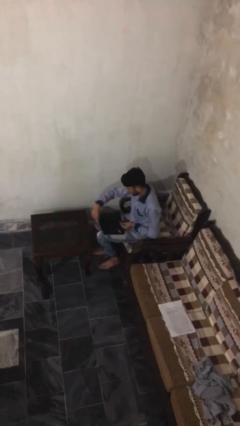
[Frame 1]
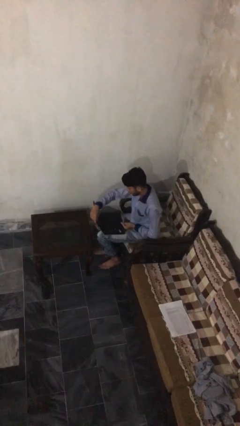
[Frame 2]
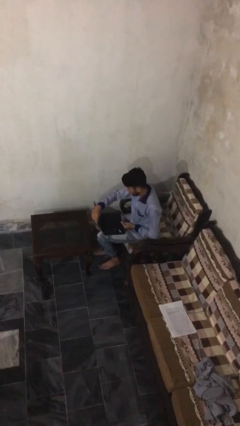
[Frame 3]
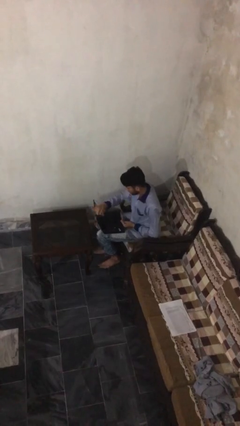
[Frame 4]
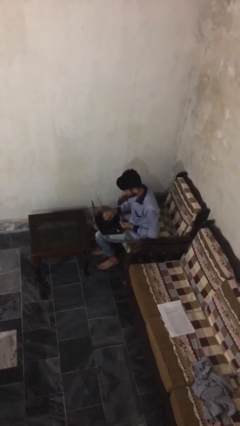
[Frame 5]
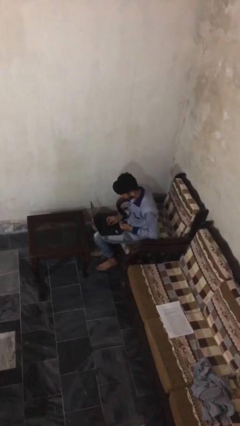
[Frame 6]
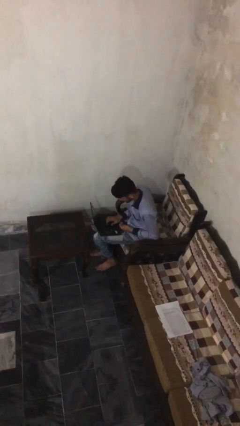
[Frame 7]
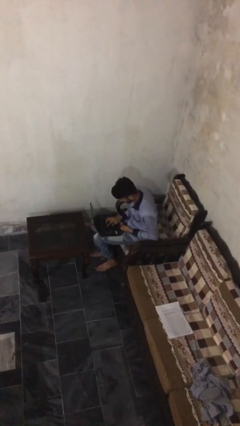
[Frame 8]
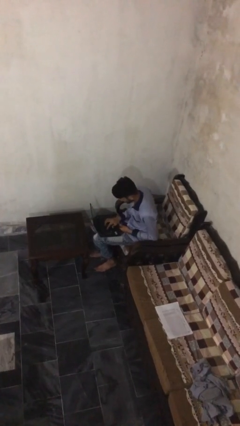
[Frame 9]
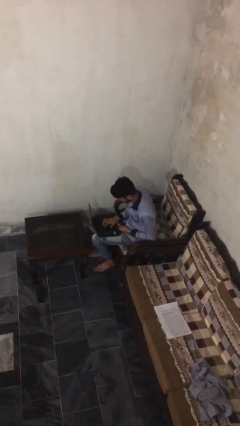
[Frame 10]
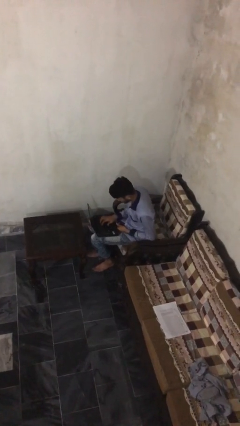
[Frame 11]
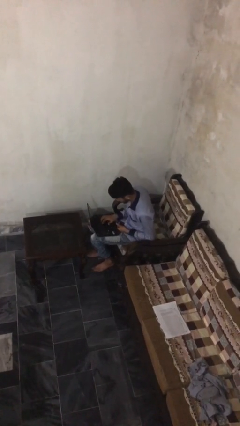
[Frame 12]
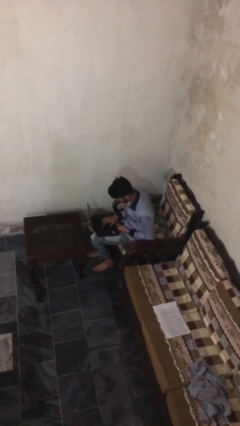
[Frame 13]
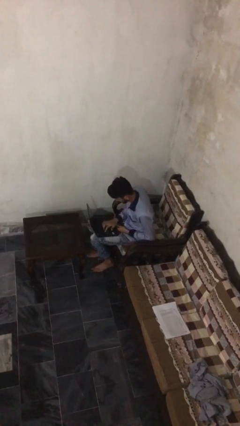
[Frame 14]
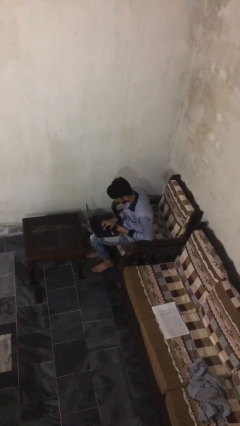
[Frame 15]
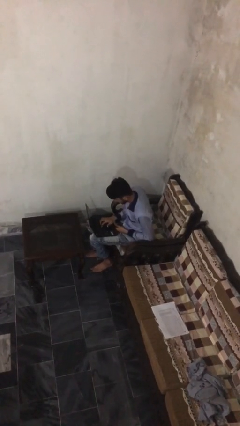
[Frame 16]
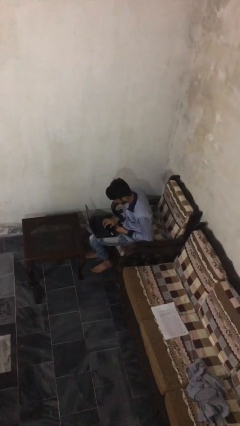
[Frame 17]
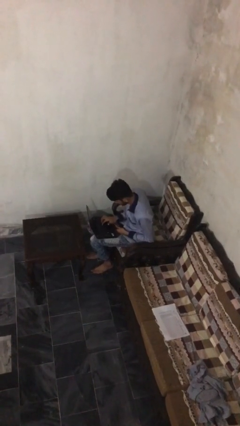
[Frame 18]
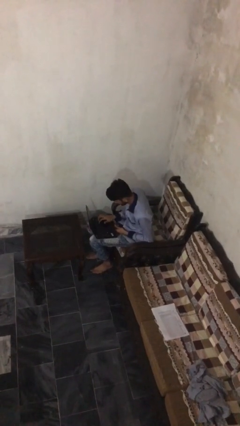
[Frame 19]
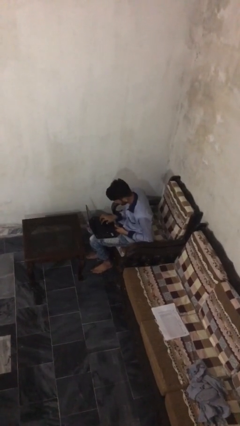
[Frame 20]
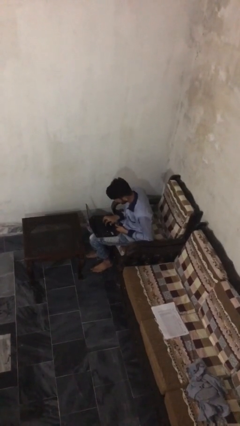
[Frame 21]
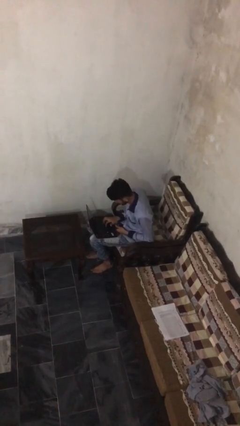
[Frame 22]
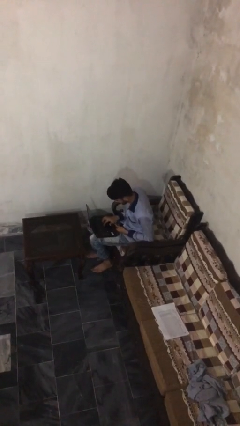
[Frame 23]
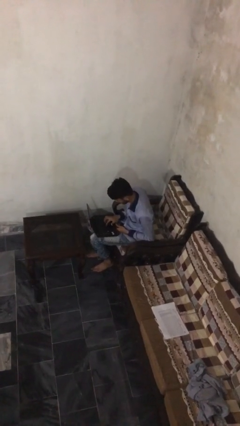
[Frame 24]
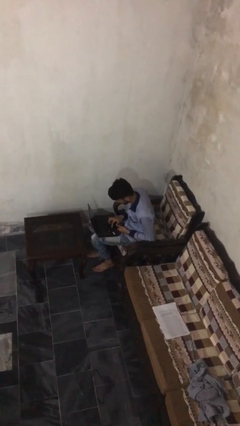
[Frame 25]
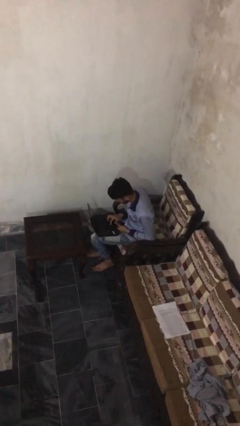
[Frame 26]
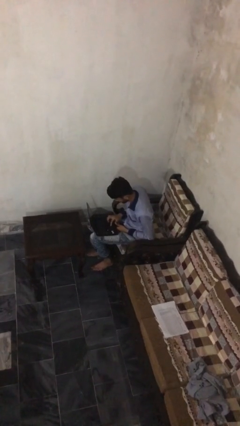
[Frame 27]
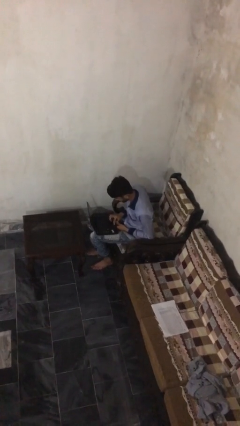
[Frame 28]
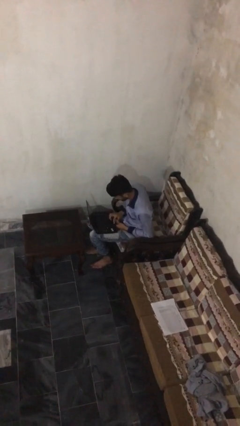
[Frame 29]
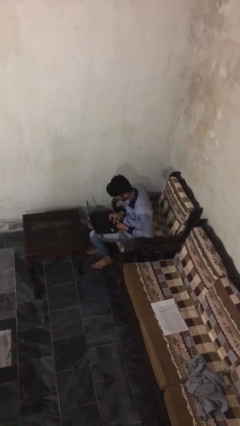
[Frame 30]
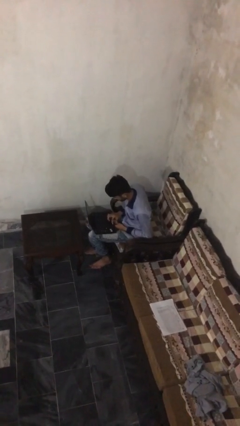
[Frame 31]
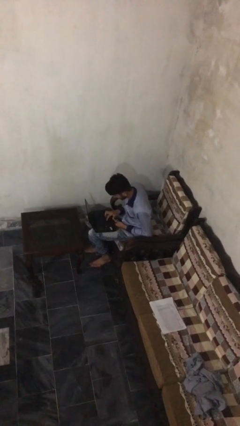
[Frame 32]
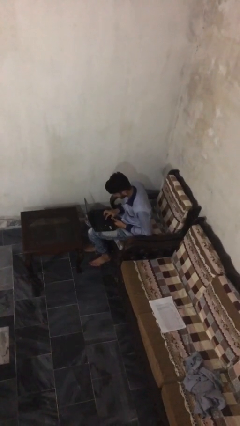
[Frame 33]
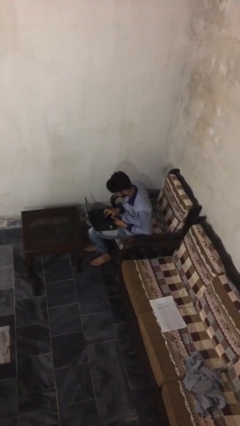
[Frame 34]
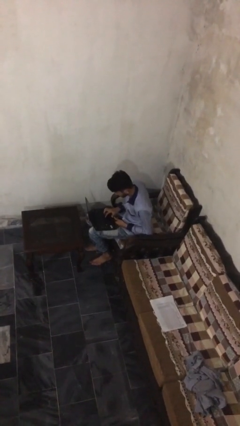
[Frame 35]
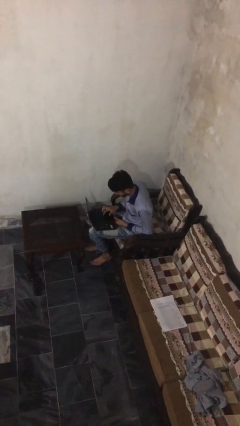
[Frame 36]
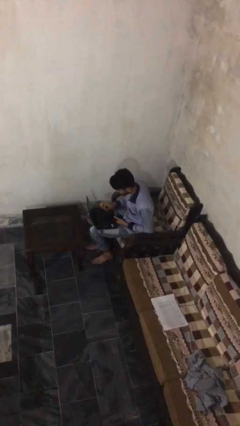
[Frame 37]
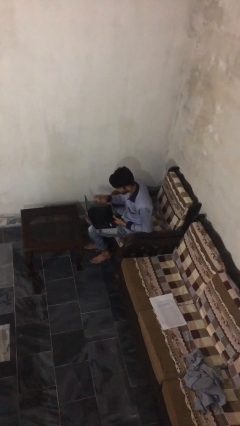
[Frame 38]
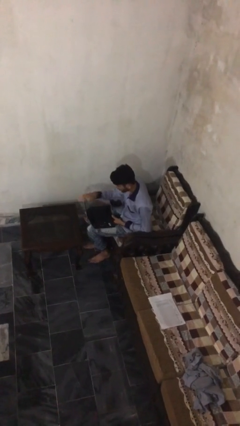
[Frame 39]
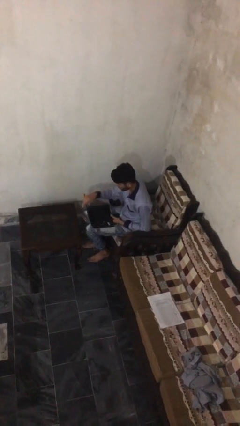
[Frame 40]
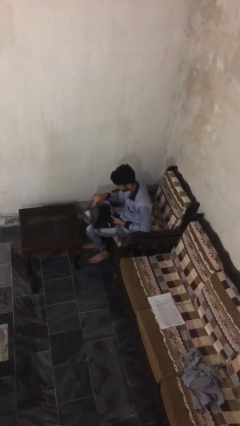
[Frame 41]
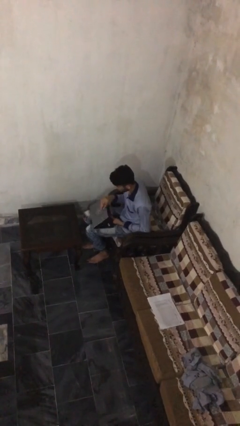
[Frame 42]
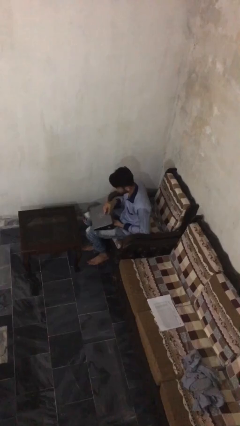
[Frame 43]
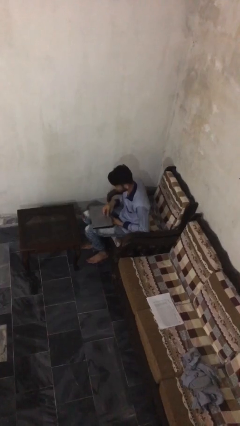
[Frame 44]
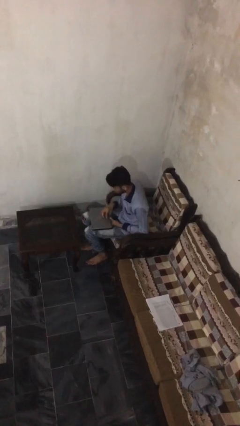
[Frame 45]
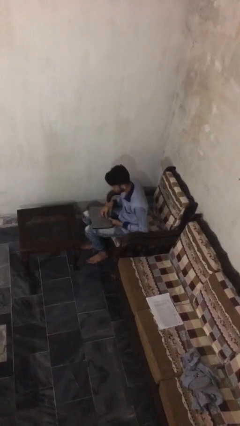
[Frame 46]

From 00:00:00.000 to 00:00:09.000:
person interacts with laptop

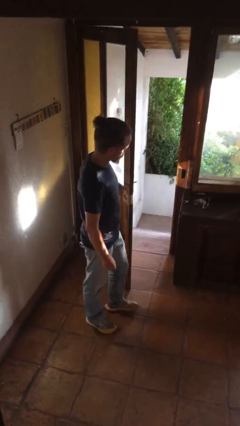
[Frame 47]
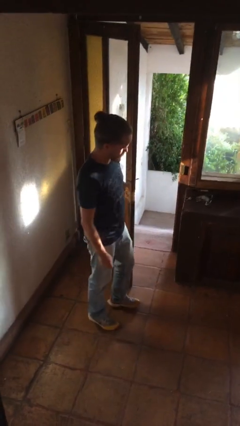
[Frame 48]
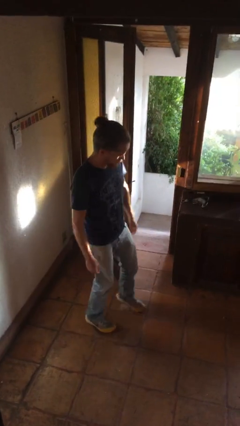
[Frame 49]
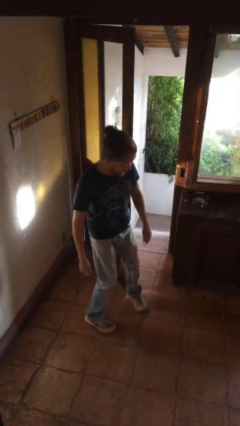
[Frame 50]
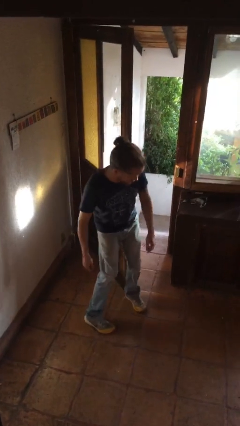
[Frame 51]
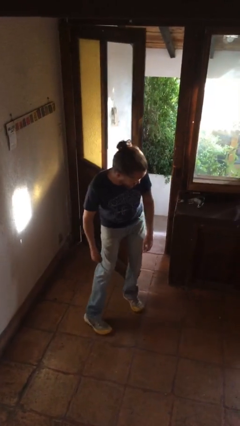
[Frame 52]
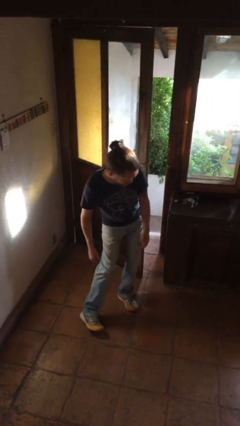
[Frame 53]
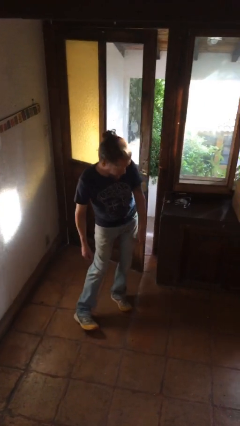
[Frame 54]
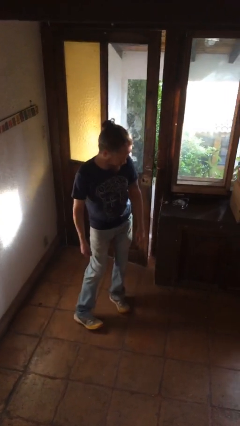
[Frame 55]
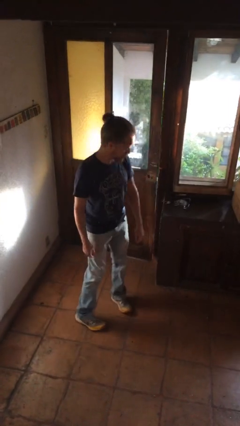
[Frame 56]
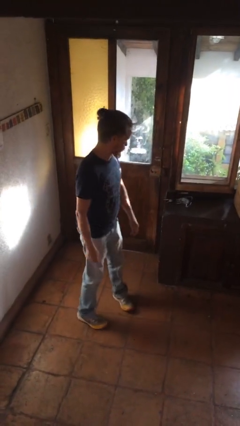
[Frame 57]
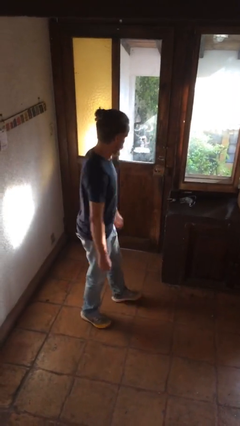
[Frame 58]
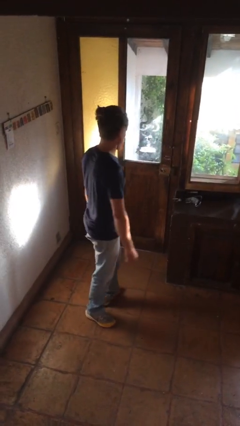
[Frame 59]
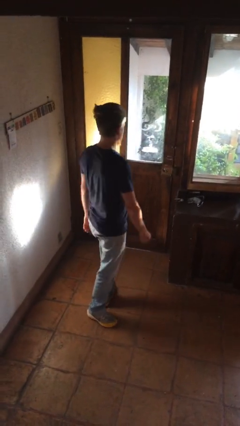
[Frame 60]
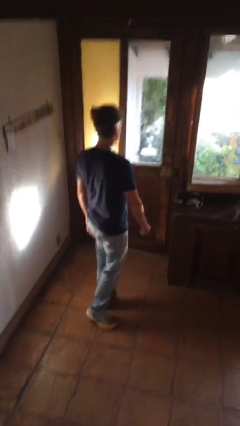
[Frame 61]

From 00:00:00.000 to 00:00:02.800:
person closes door with hip

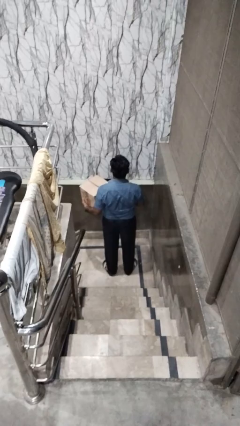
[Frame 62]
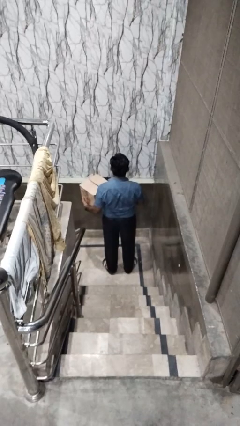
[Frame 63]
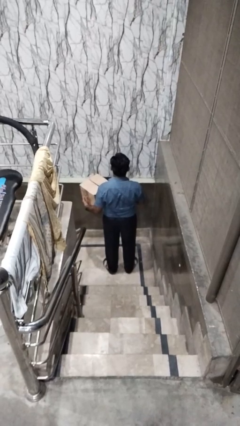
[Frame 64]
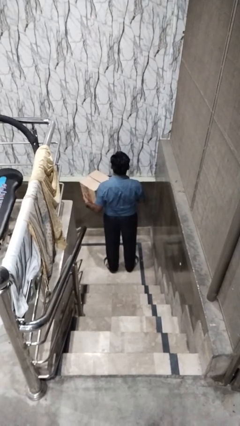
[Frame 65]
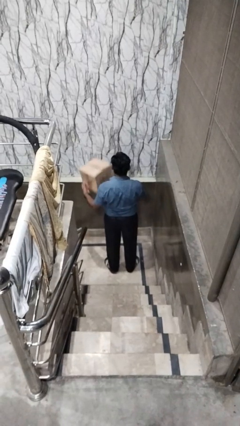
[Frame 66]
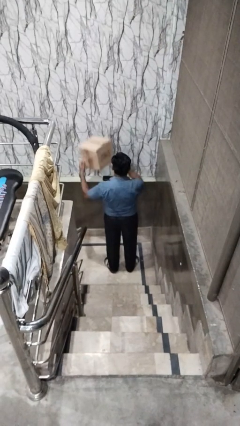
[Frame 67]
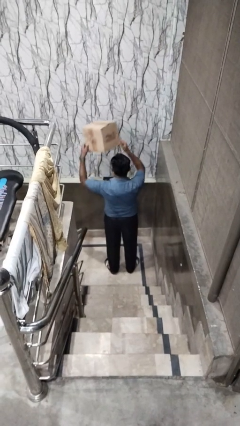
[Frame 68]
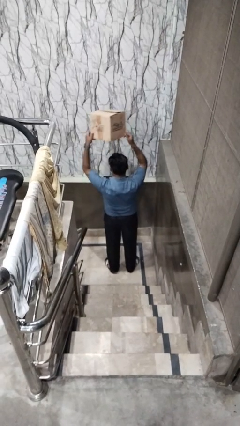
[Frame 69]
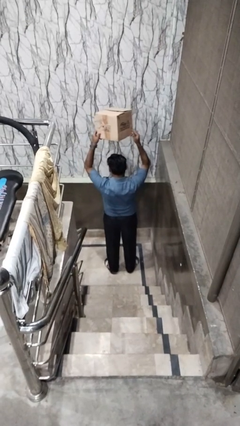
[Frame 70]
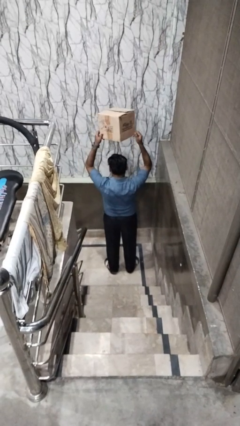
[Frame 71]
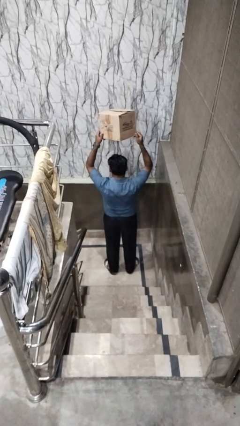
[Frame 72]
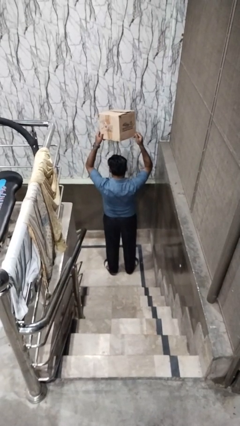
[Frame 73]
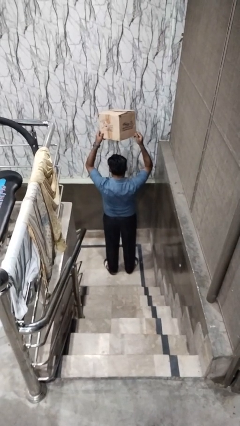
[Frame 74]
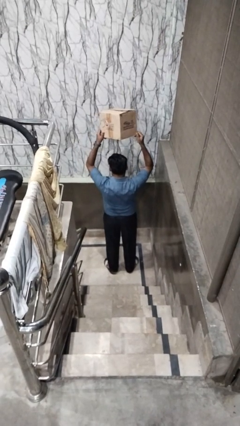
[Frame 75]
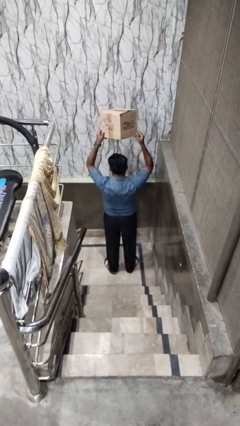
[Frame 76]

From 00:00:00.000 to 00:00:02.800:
person holds object above head

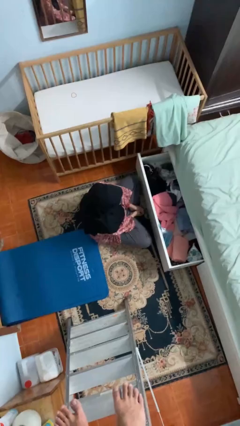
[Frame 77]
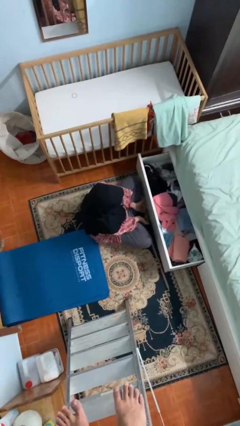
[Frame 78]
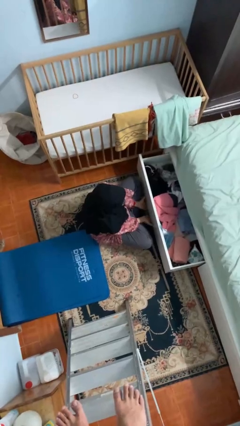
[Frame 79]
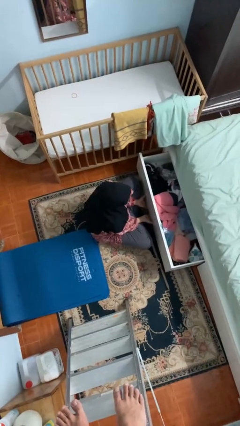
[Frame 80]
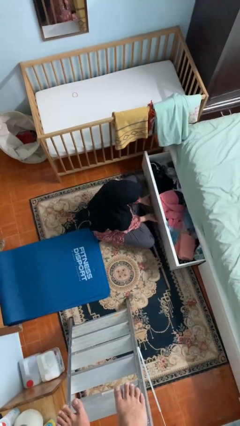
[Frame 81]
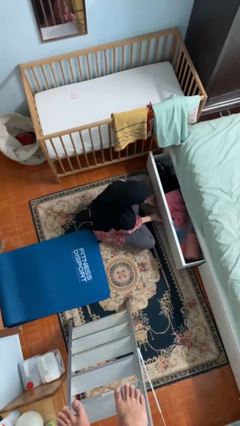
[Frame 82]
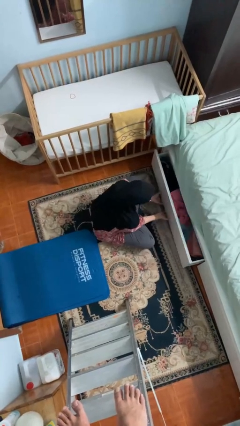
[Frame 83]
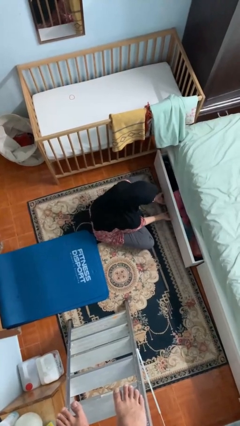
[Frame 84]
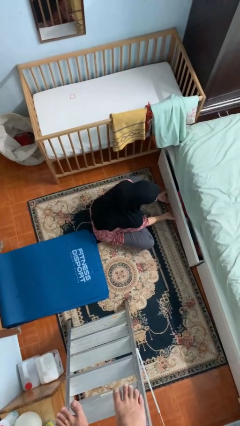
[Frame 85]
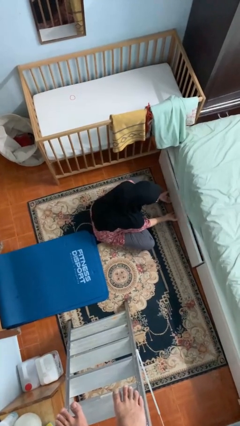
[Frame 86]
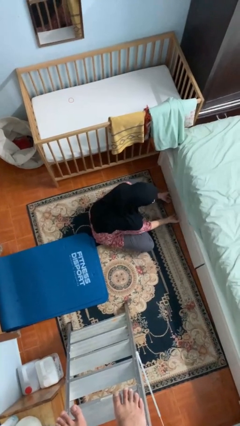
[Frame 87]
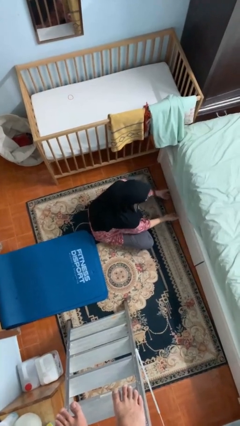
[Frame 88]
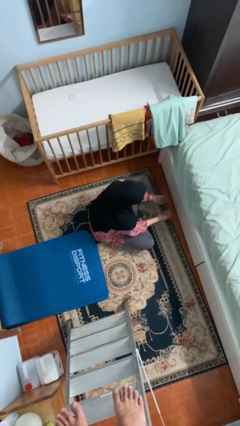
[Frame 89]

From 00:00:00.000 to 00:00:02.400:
person closes dresser drawer

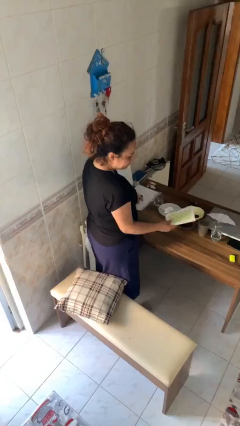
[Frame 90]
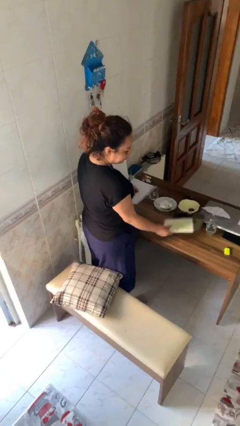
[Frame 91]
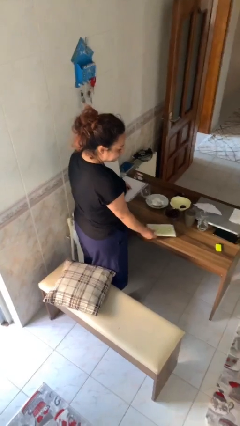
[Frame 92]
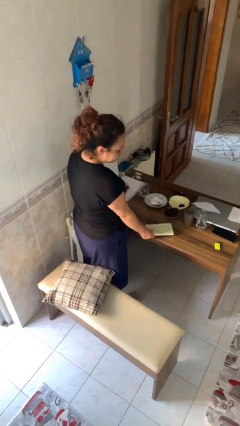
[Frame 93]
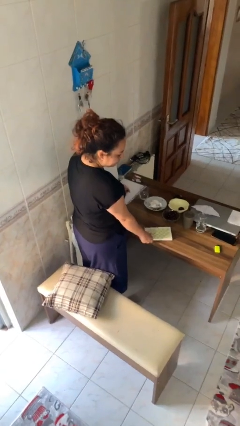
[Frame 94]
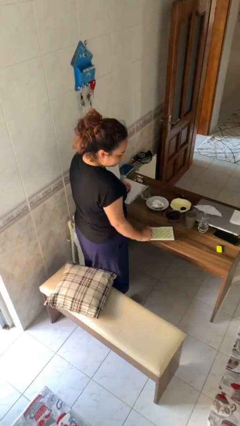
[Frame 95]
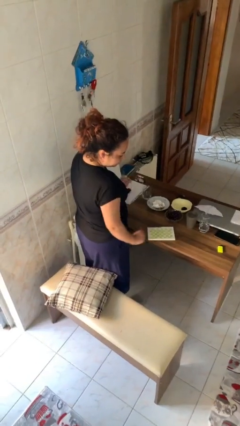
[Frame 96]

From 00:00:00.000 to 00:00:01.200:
person puts down object on table
